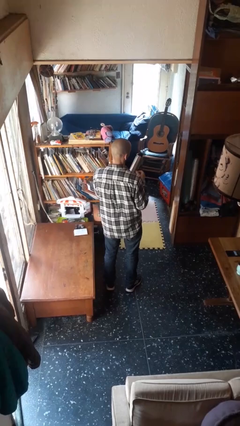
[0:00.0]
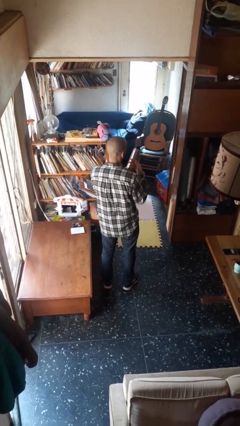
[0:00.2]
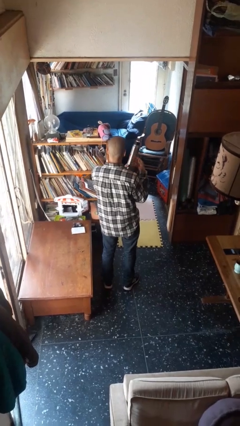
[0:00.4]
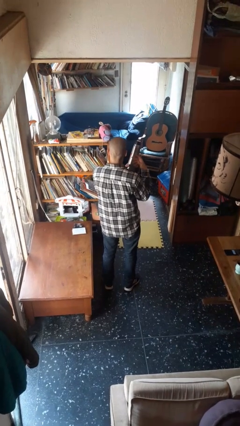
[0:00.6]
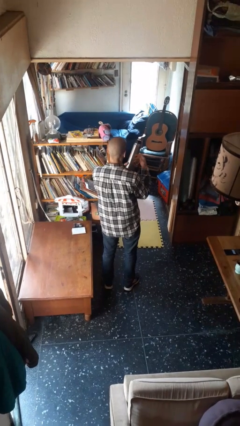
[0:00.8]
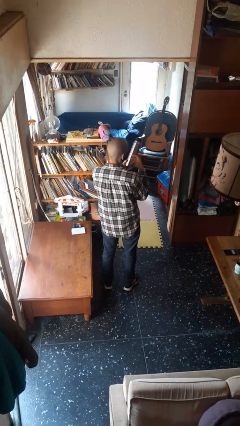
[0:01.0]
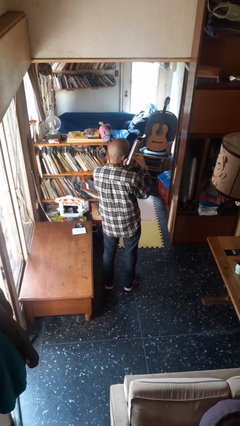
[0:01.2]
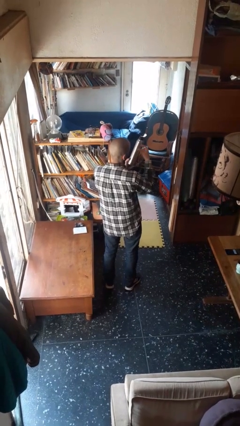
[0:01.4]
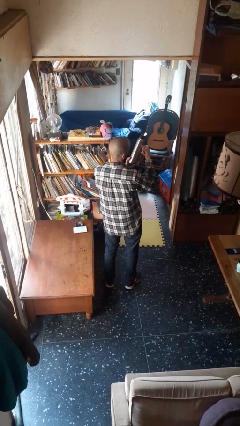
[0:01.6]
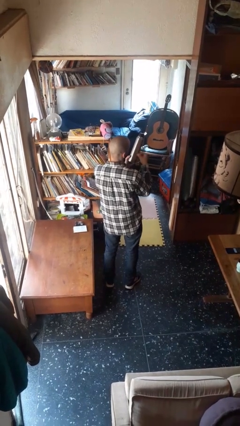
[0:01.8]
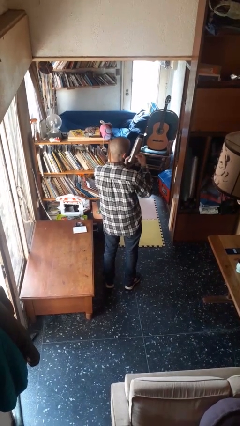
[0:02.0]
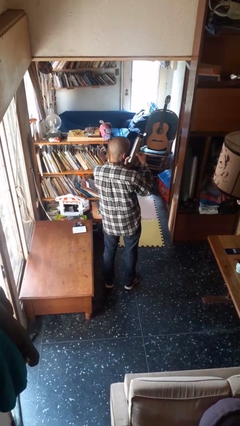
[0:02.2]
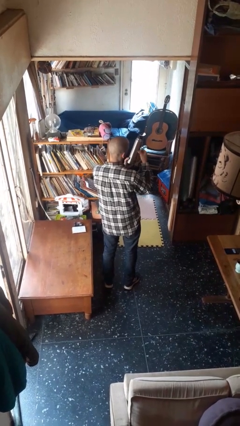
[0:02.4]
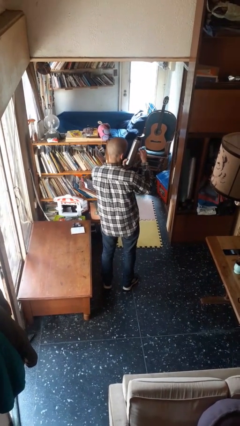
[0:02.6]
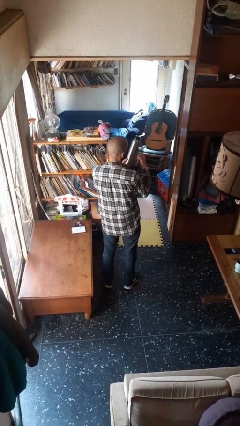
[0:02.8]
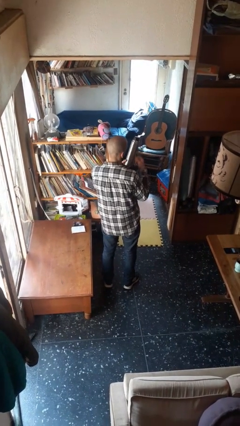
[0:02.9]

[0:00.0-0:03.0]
person taps object with finger

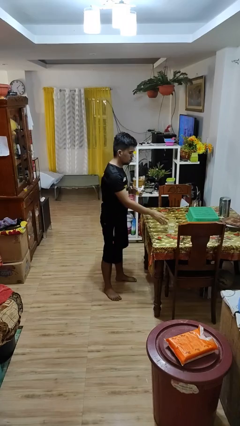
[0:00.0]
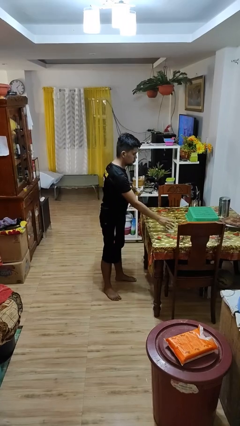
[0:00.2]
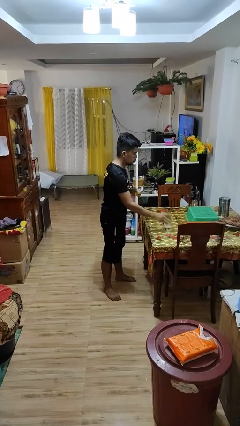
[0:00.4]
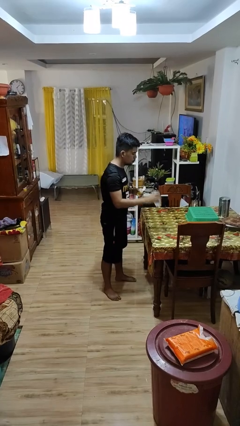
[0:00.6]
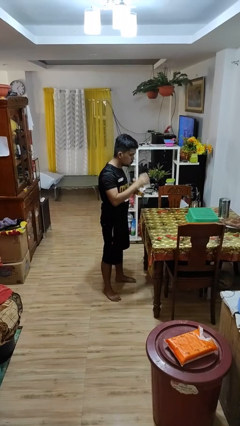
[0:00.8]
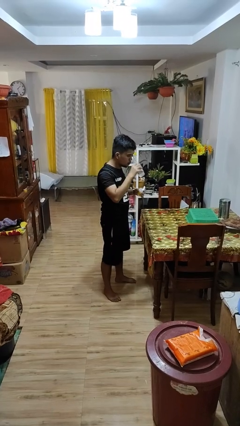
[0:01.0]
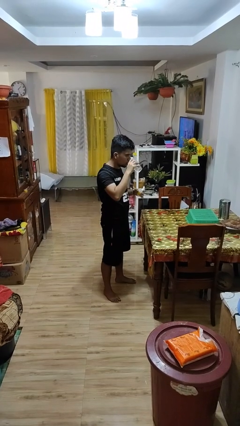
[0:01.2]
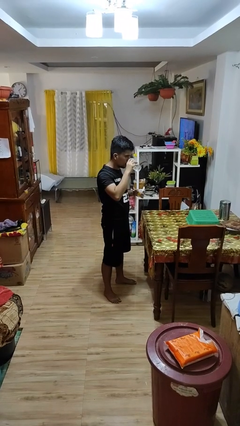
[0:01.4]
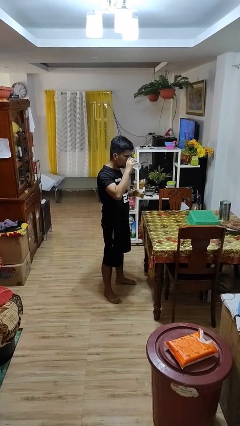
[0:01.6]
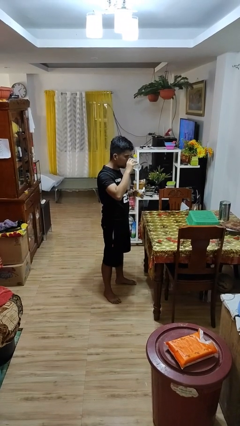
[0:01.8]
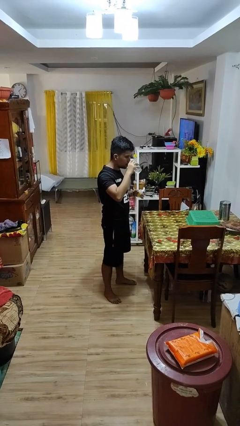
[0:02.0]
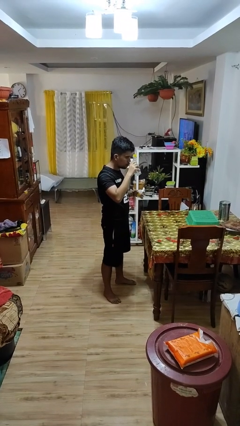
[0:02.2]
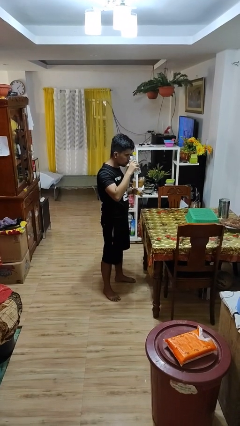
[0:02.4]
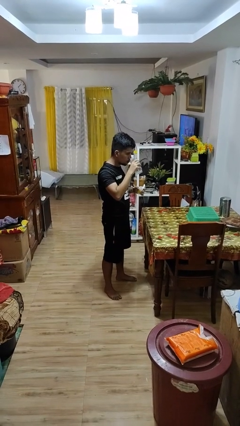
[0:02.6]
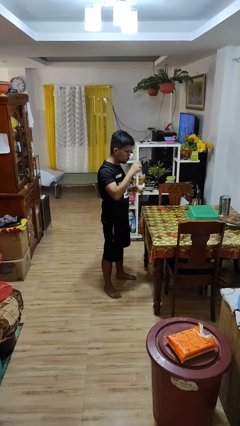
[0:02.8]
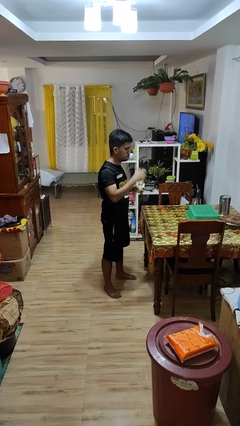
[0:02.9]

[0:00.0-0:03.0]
person drinks from cup

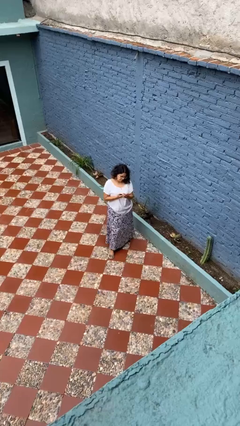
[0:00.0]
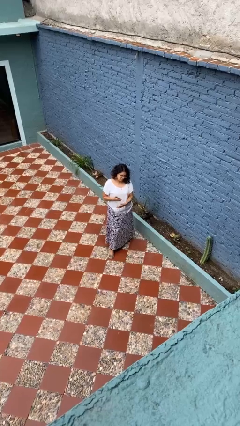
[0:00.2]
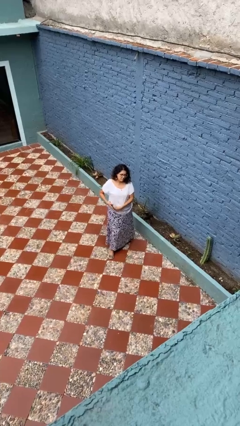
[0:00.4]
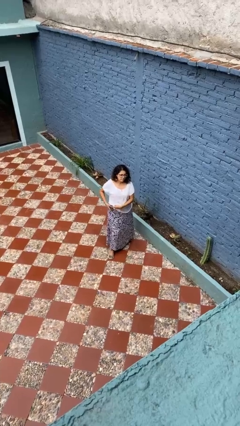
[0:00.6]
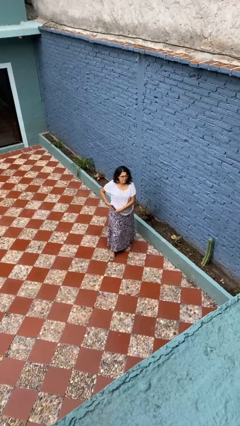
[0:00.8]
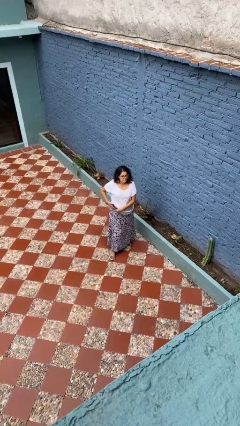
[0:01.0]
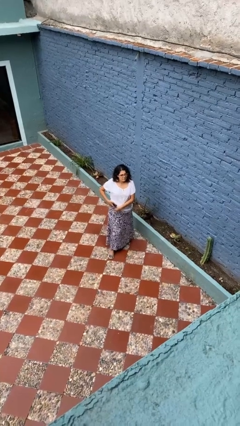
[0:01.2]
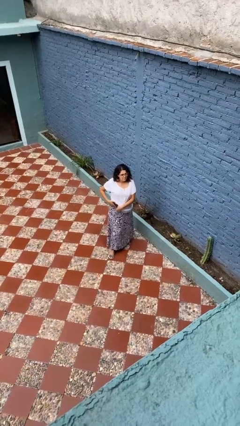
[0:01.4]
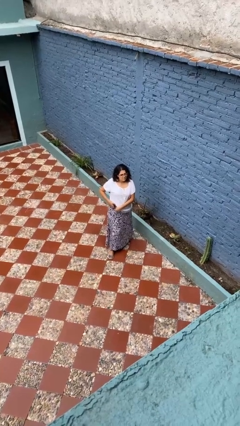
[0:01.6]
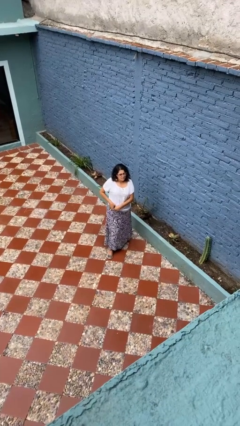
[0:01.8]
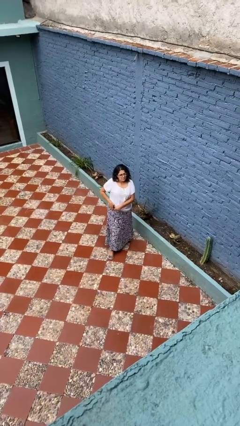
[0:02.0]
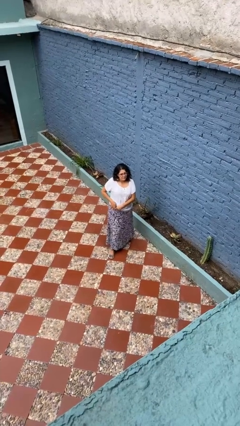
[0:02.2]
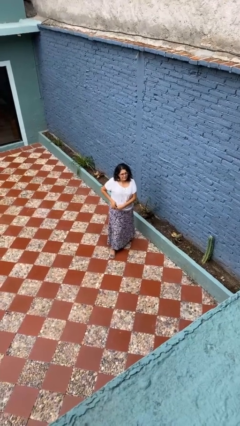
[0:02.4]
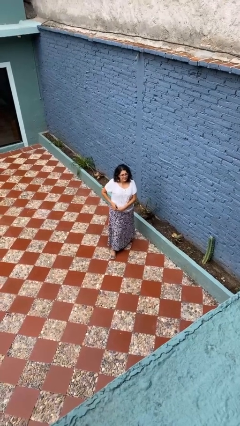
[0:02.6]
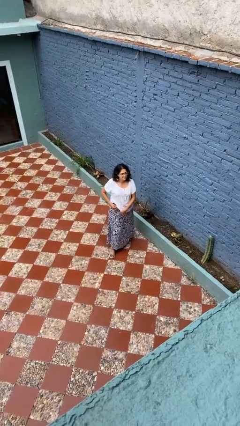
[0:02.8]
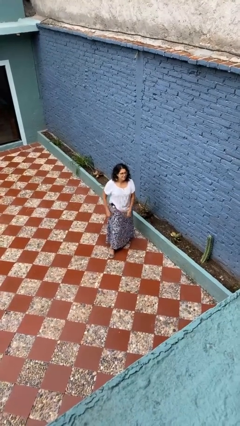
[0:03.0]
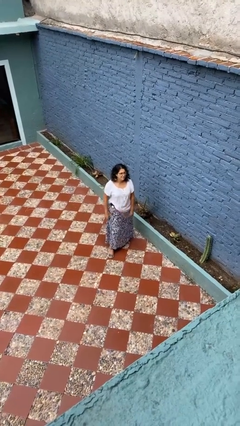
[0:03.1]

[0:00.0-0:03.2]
person puts phone into pocket

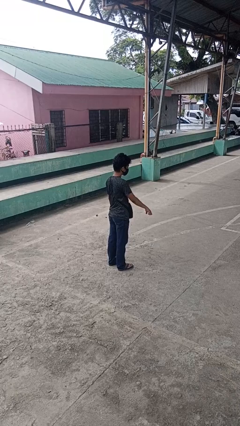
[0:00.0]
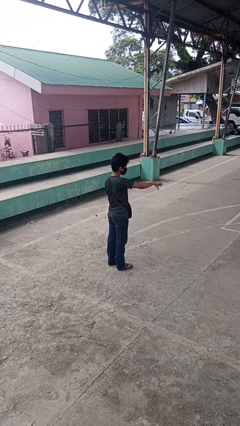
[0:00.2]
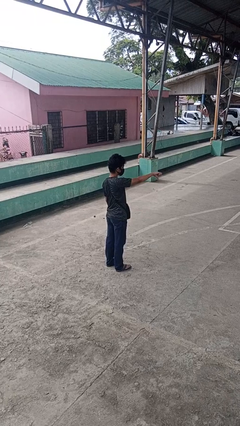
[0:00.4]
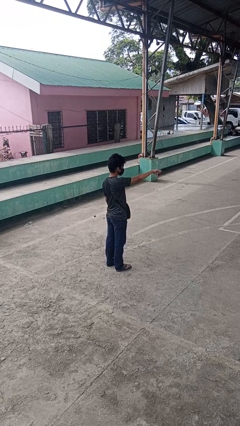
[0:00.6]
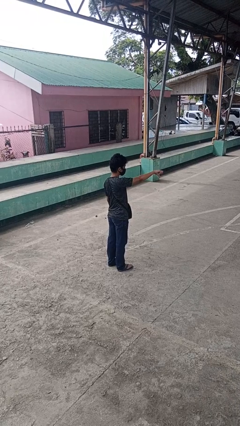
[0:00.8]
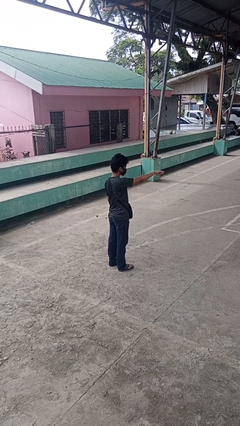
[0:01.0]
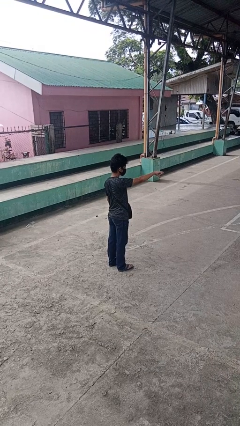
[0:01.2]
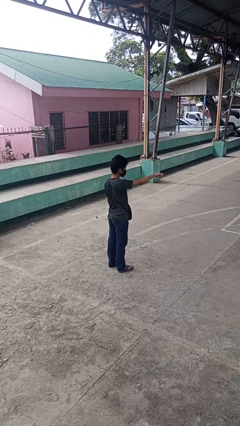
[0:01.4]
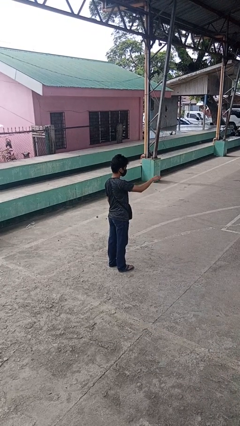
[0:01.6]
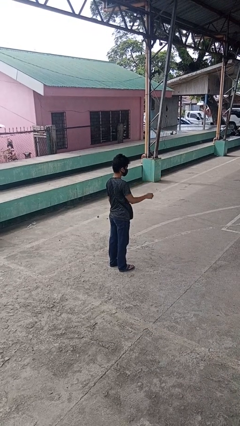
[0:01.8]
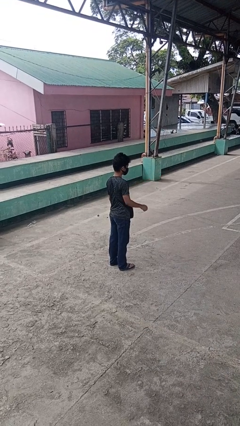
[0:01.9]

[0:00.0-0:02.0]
person gestures thumbs down

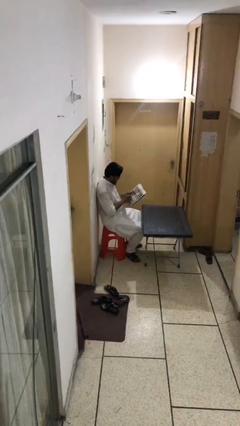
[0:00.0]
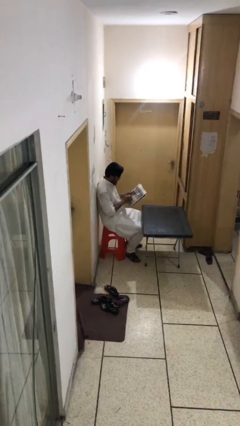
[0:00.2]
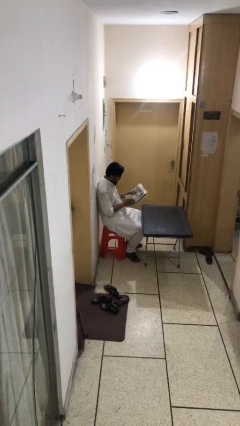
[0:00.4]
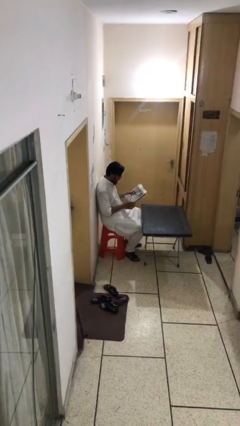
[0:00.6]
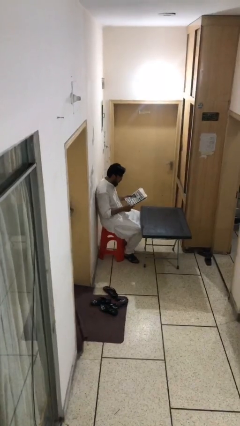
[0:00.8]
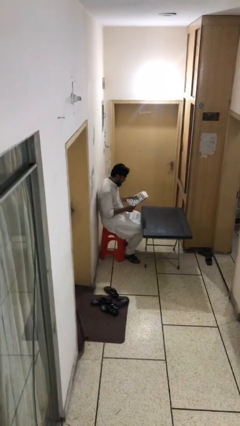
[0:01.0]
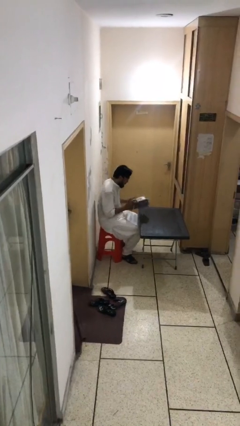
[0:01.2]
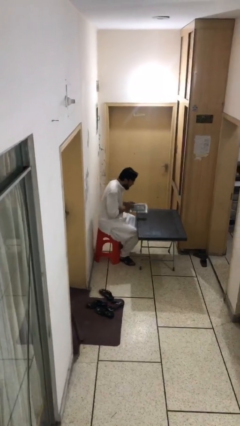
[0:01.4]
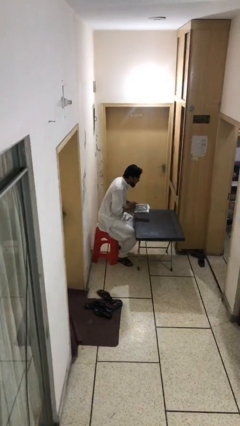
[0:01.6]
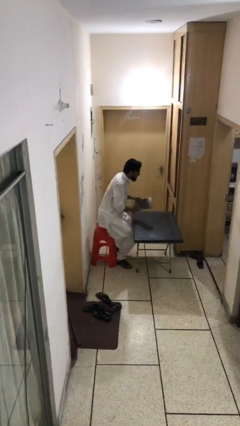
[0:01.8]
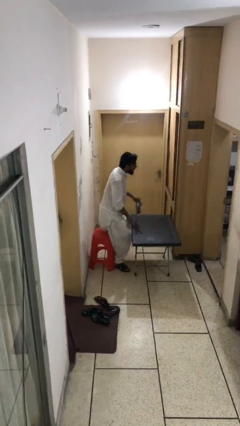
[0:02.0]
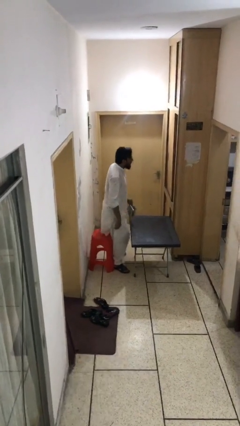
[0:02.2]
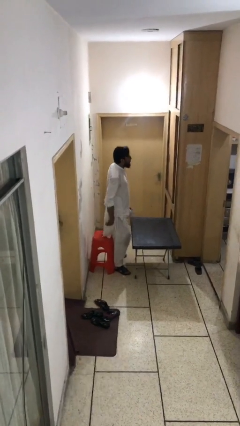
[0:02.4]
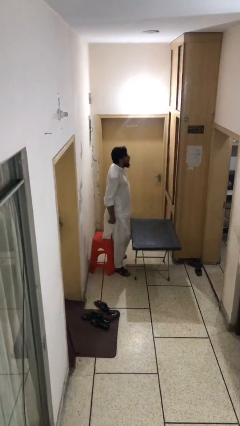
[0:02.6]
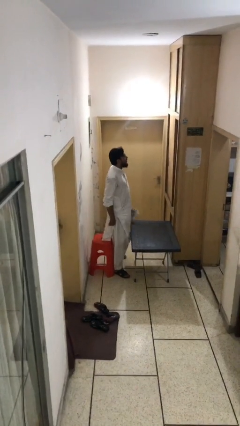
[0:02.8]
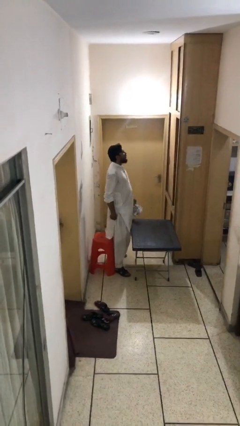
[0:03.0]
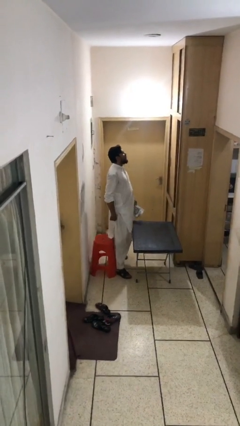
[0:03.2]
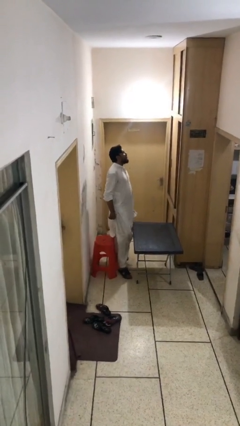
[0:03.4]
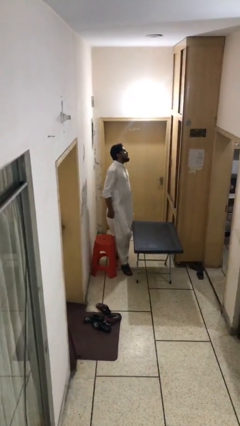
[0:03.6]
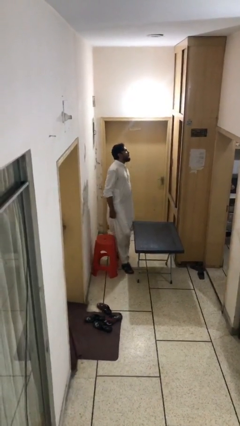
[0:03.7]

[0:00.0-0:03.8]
person stands up

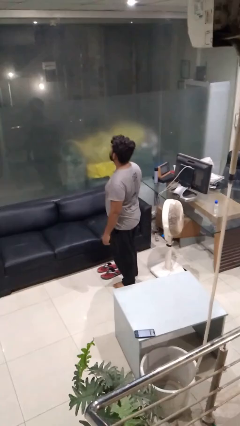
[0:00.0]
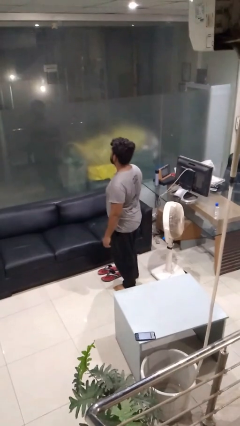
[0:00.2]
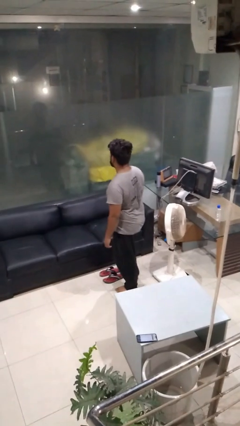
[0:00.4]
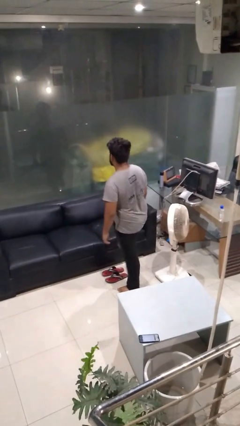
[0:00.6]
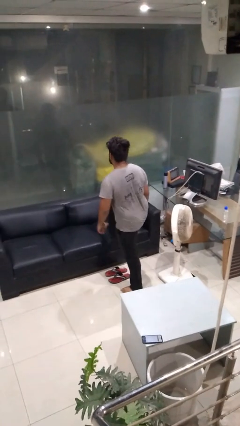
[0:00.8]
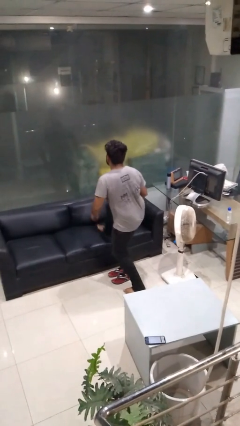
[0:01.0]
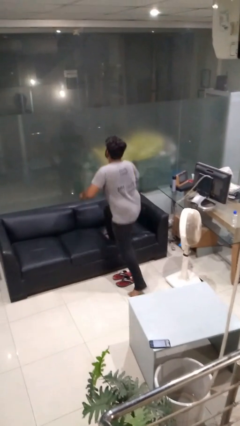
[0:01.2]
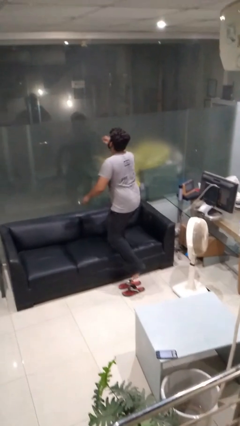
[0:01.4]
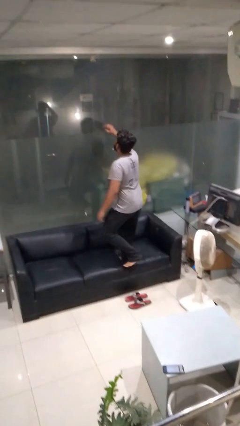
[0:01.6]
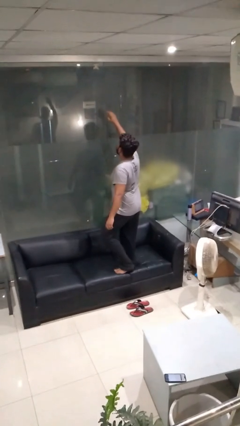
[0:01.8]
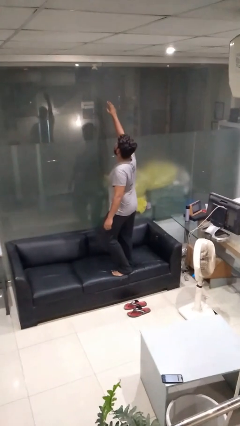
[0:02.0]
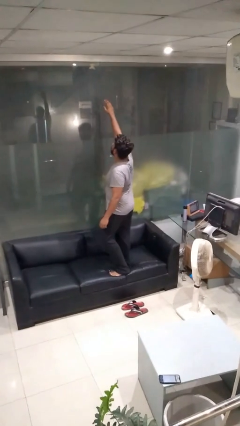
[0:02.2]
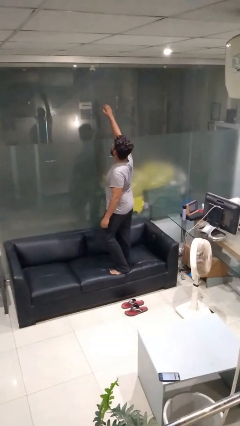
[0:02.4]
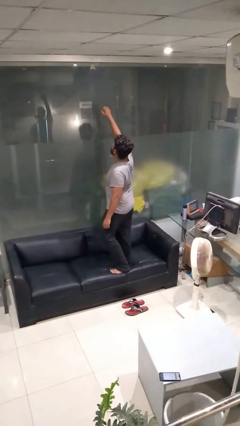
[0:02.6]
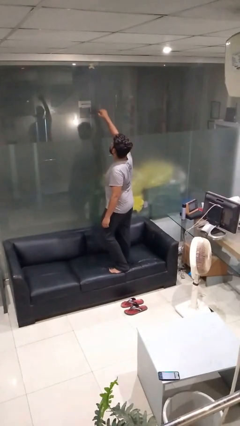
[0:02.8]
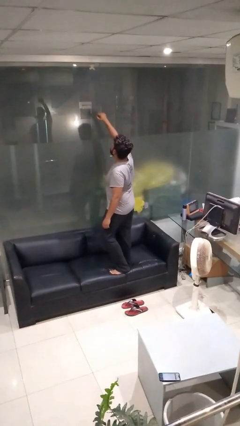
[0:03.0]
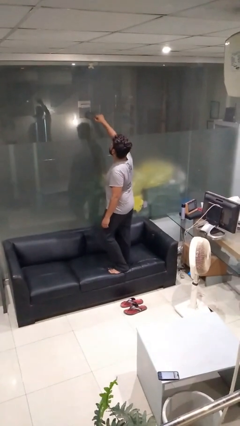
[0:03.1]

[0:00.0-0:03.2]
person climbs on couch
